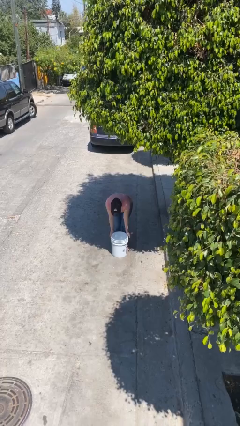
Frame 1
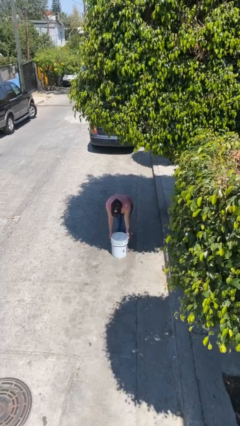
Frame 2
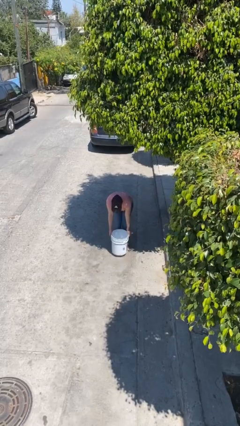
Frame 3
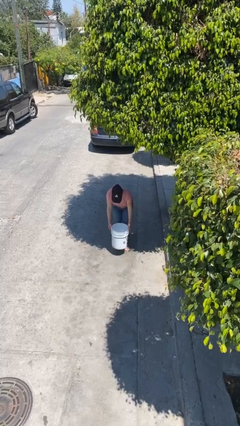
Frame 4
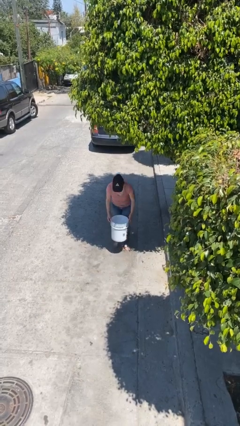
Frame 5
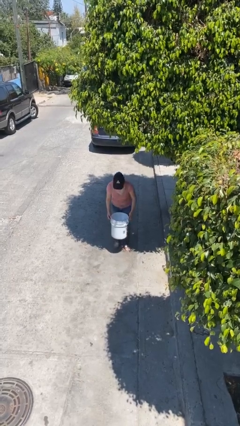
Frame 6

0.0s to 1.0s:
person picks up object from floor

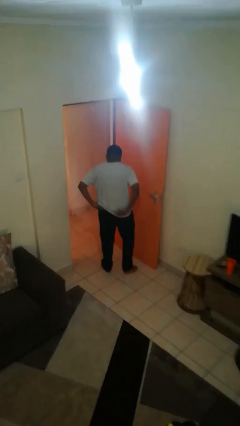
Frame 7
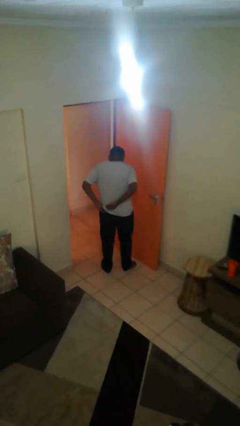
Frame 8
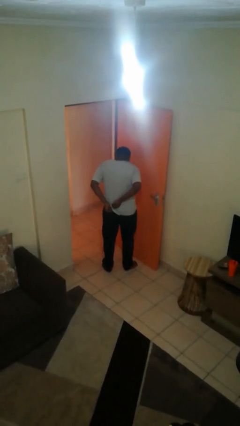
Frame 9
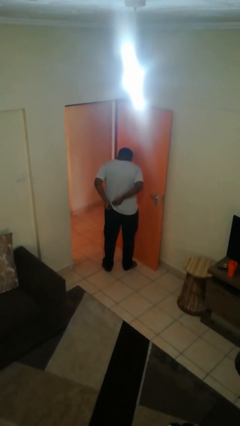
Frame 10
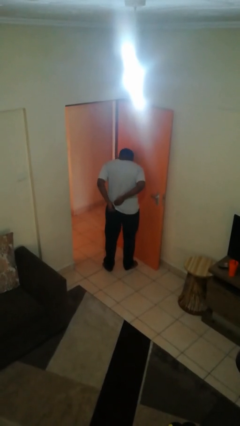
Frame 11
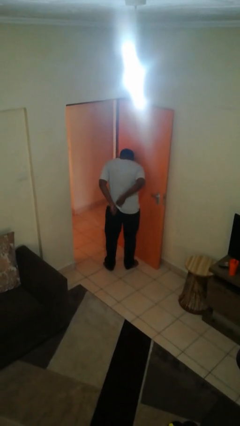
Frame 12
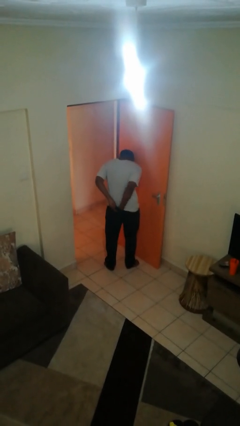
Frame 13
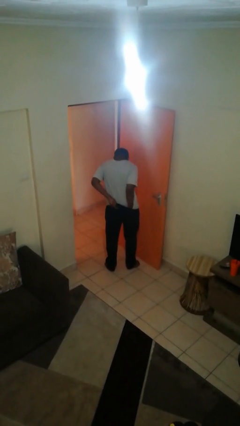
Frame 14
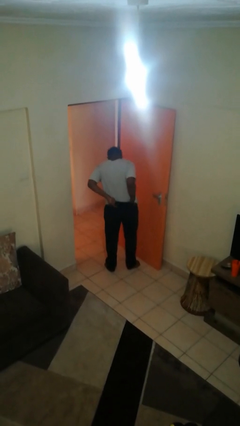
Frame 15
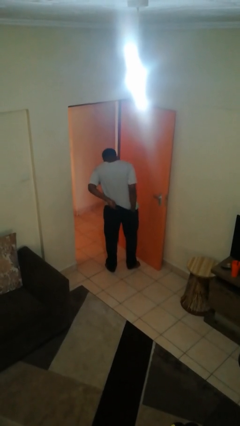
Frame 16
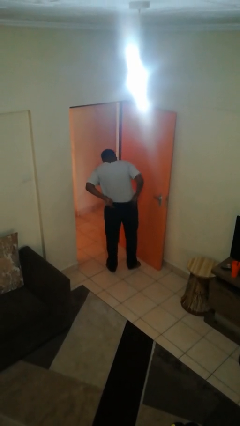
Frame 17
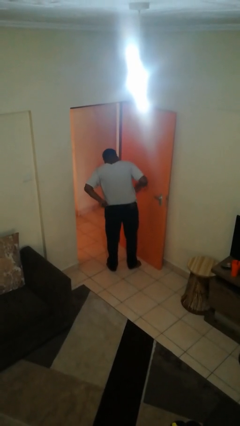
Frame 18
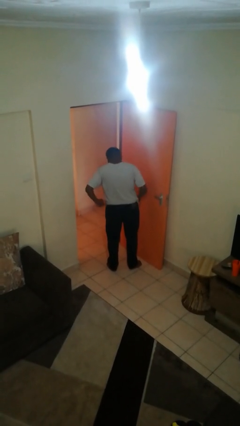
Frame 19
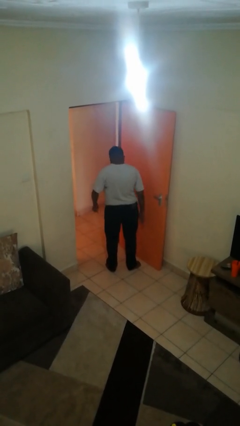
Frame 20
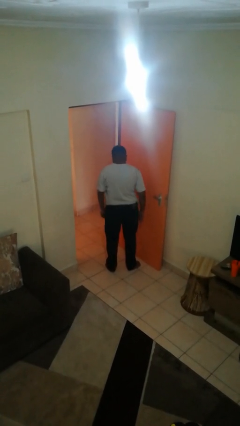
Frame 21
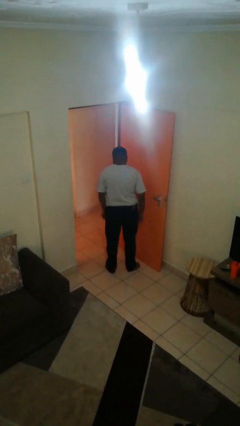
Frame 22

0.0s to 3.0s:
person tucks in shirt

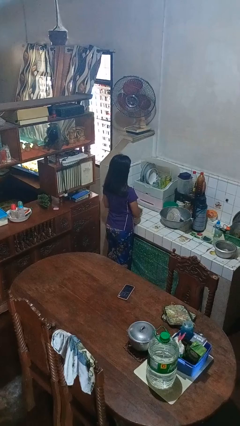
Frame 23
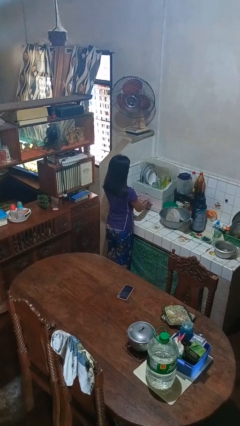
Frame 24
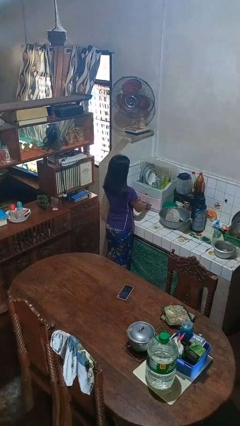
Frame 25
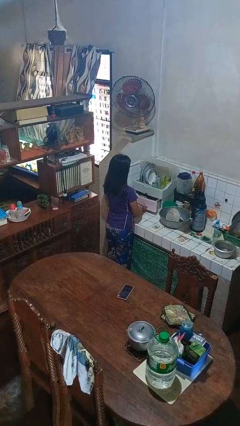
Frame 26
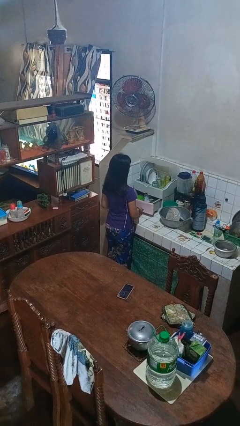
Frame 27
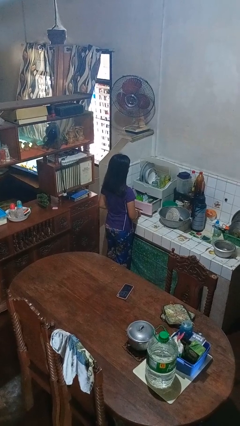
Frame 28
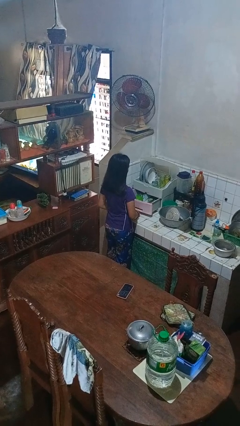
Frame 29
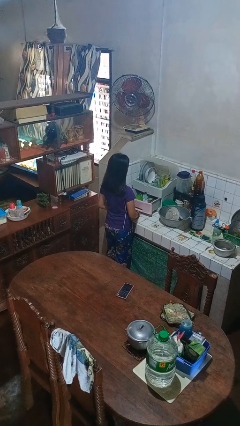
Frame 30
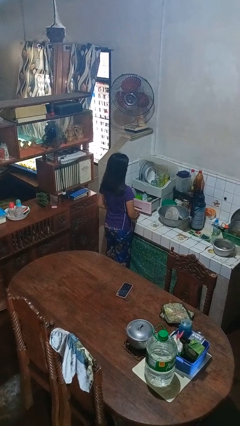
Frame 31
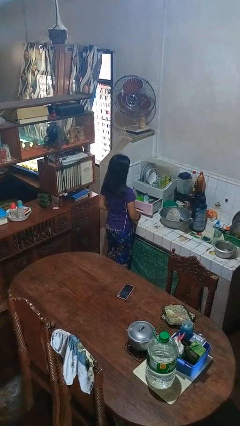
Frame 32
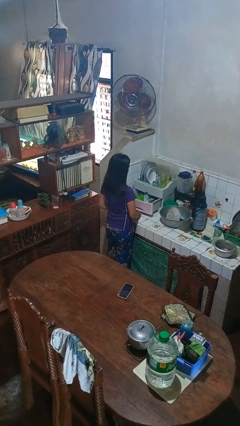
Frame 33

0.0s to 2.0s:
person opens kitchen drawer

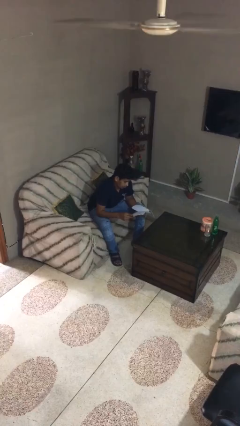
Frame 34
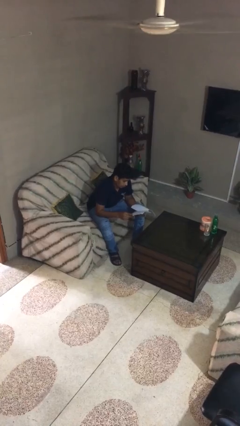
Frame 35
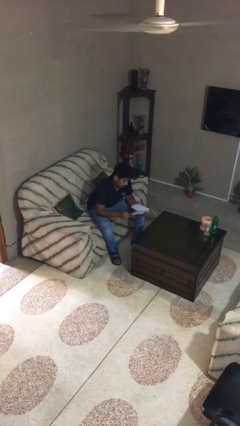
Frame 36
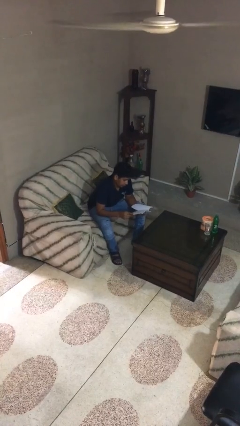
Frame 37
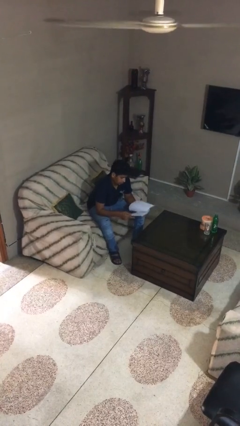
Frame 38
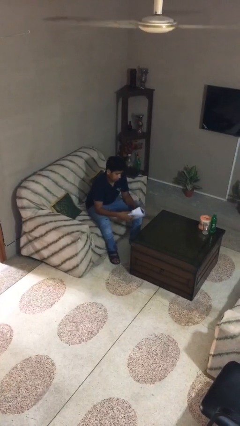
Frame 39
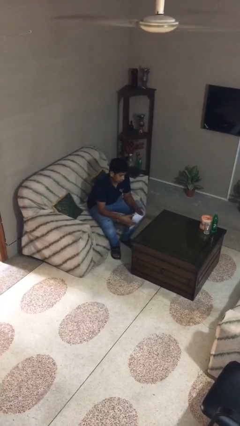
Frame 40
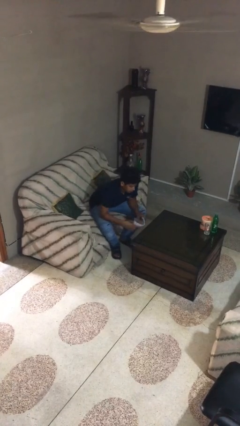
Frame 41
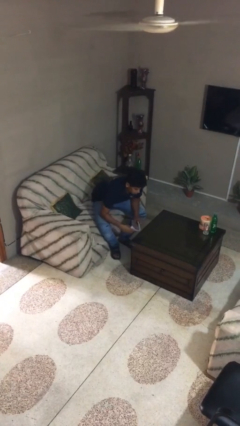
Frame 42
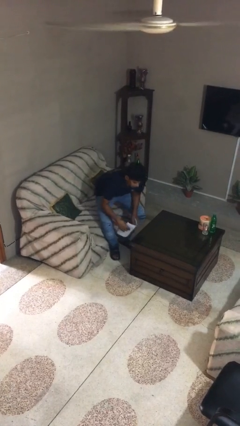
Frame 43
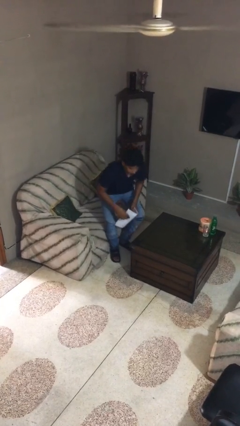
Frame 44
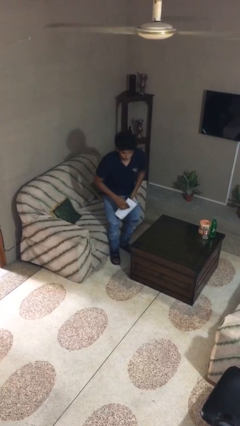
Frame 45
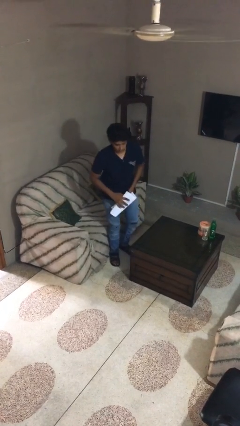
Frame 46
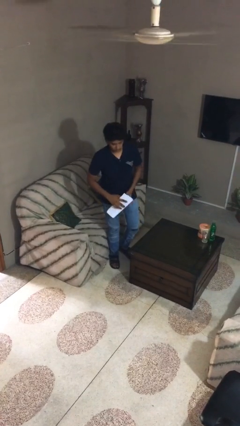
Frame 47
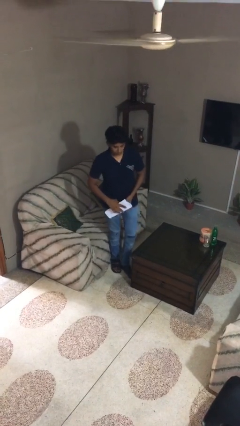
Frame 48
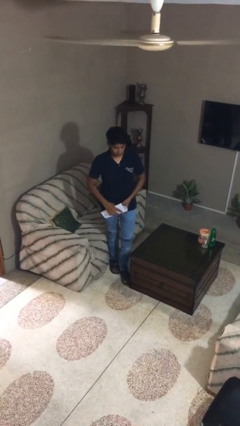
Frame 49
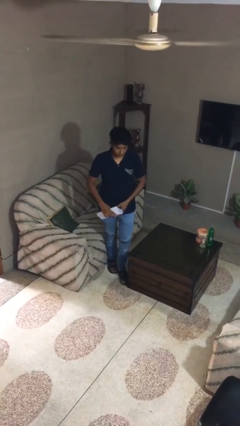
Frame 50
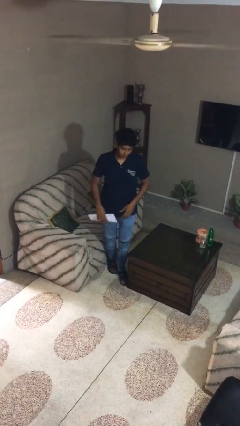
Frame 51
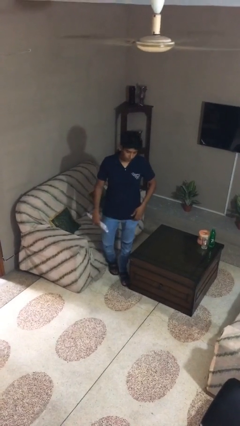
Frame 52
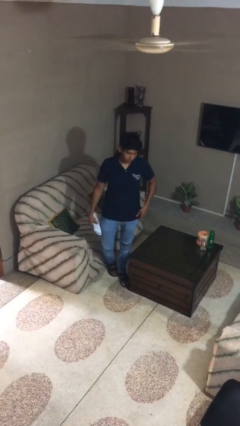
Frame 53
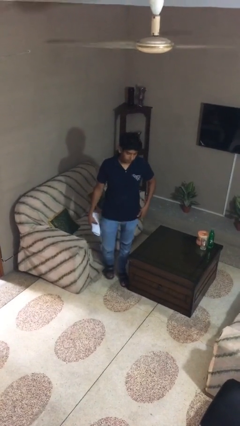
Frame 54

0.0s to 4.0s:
person stands up

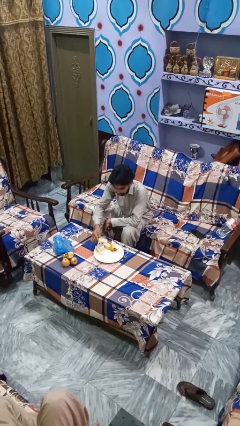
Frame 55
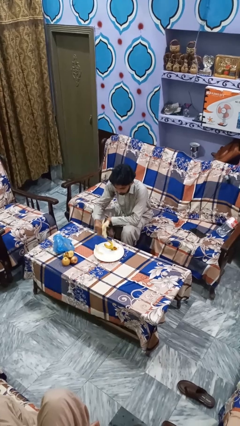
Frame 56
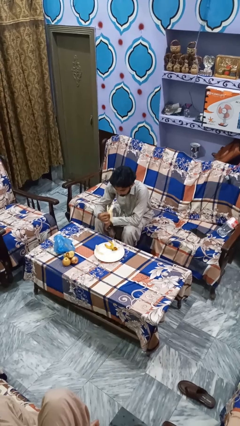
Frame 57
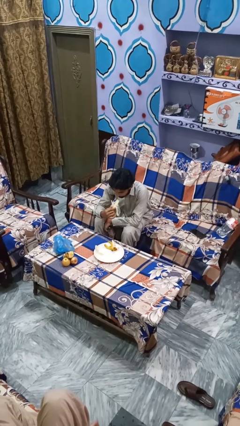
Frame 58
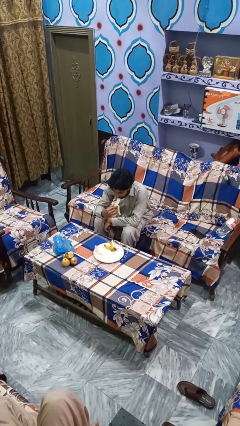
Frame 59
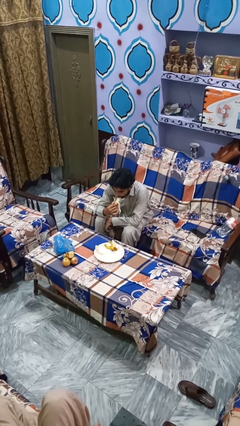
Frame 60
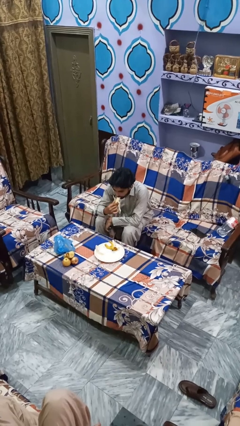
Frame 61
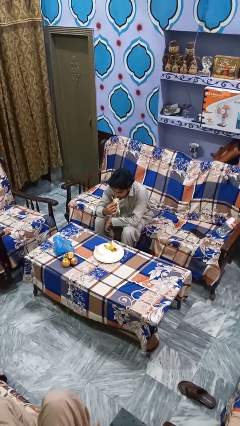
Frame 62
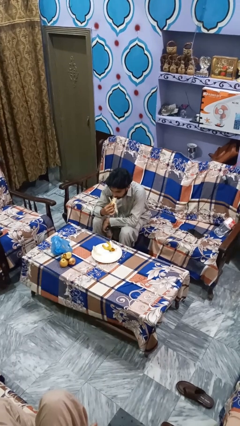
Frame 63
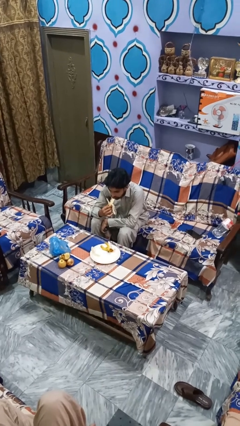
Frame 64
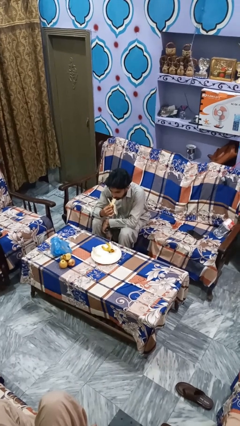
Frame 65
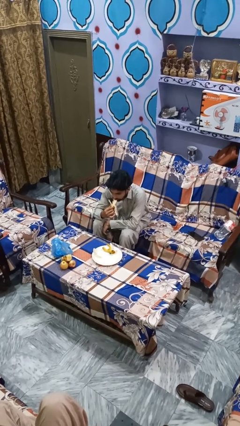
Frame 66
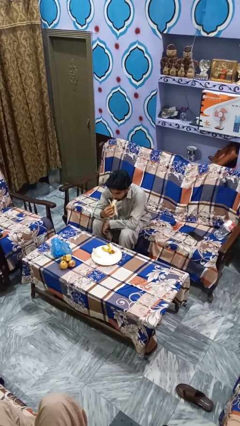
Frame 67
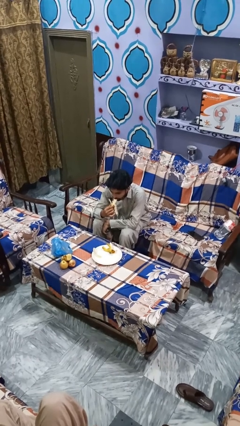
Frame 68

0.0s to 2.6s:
person eats banana

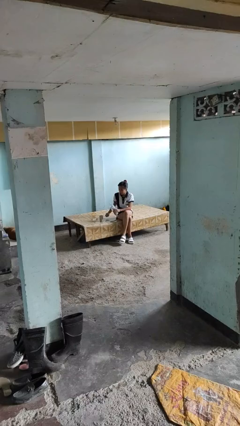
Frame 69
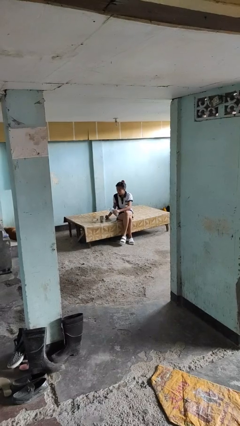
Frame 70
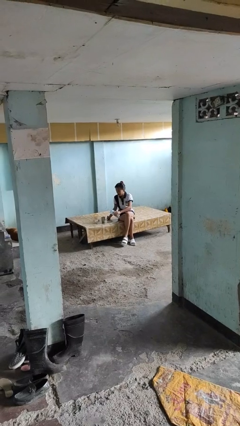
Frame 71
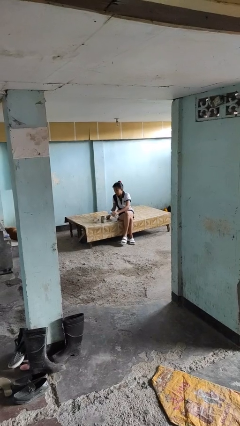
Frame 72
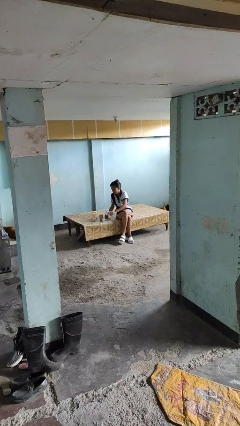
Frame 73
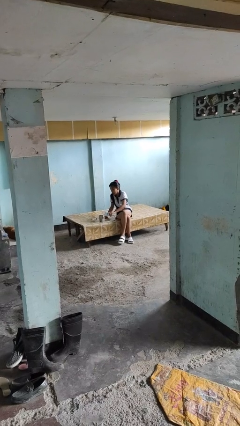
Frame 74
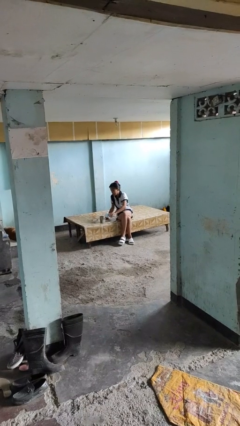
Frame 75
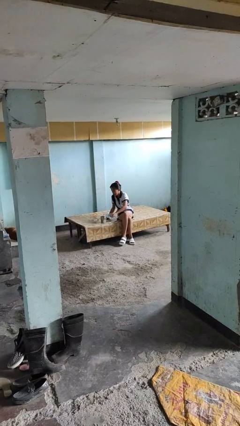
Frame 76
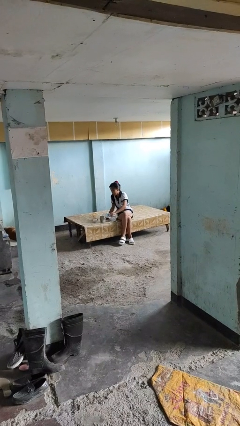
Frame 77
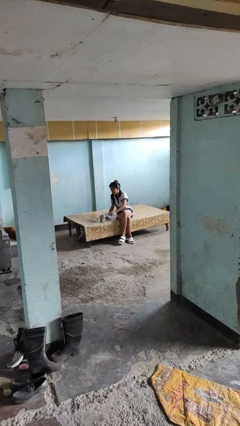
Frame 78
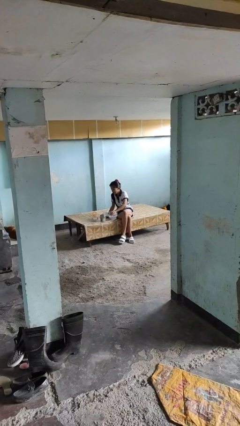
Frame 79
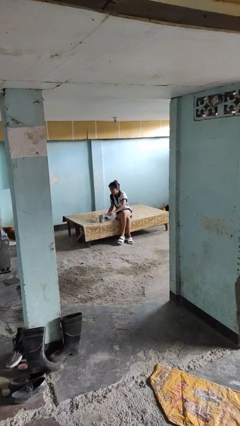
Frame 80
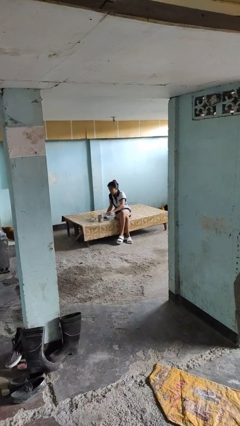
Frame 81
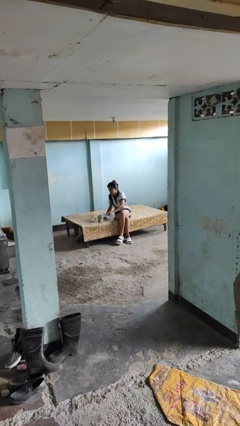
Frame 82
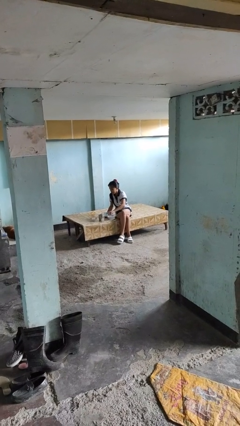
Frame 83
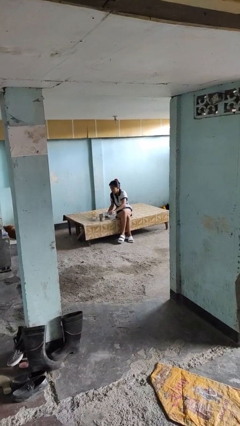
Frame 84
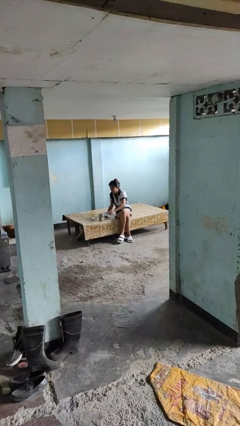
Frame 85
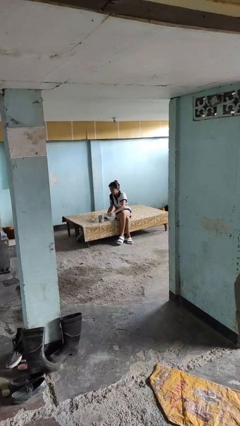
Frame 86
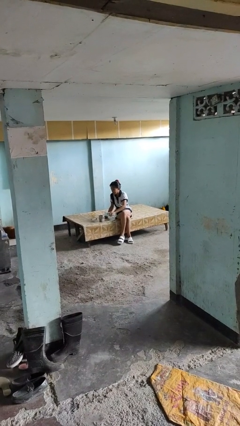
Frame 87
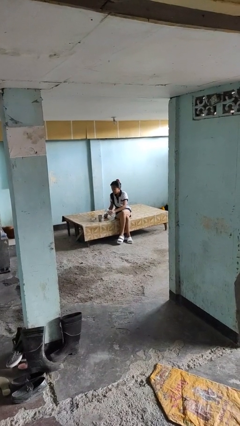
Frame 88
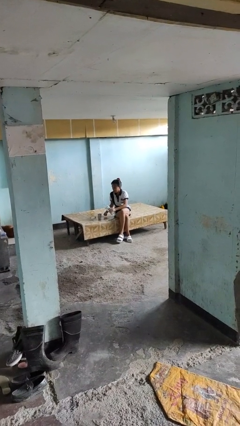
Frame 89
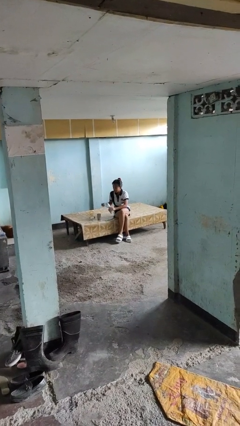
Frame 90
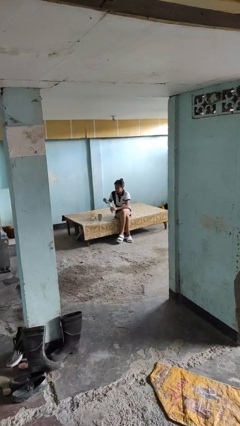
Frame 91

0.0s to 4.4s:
person pours liquid into cup
